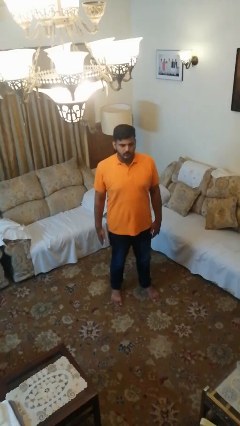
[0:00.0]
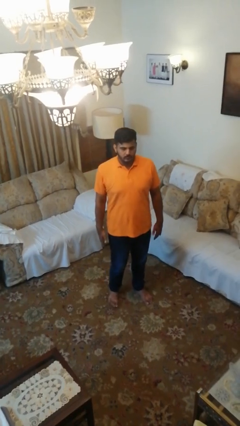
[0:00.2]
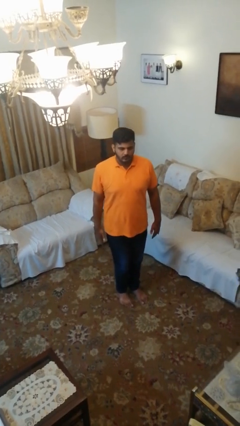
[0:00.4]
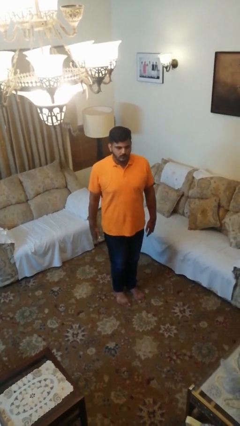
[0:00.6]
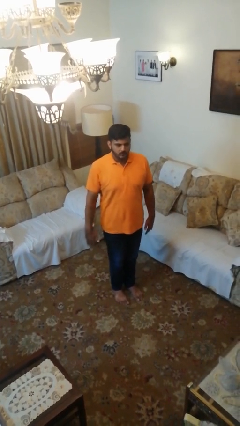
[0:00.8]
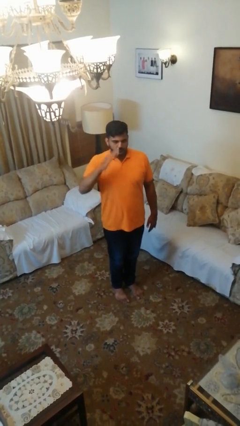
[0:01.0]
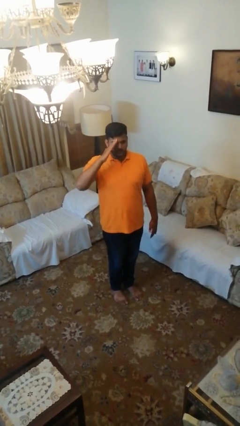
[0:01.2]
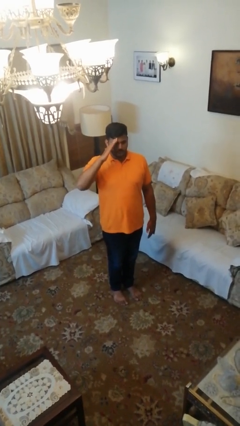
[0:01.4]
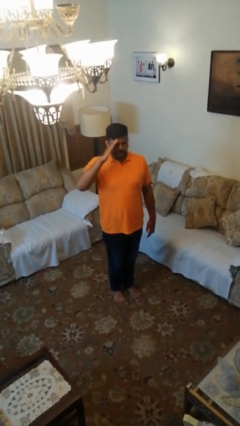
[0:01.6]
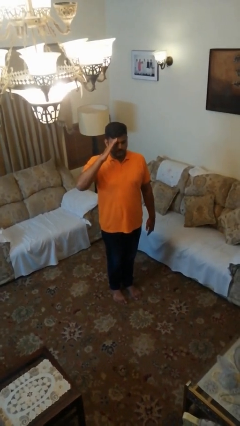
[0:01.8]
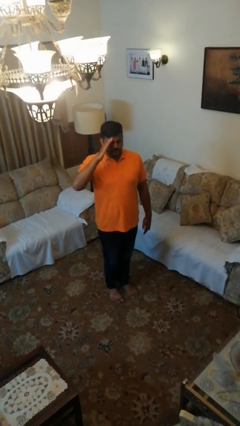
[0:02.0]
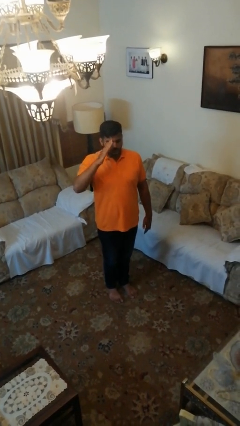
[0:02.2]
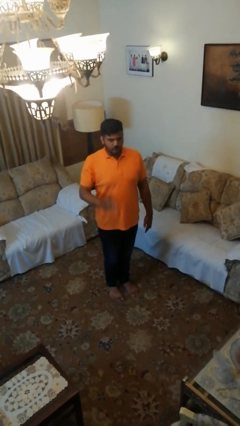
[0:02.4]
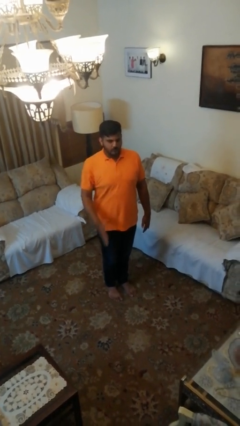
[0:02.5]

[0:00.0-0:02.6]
person salutes

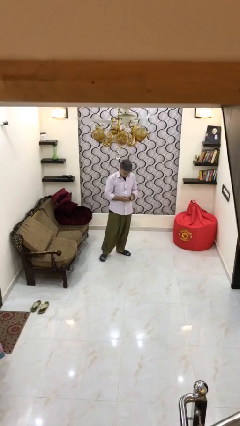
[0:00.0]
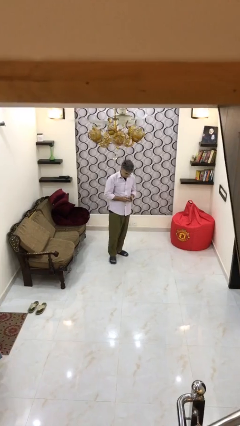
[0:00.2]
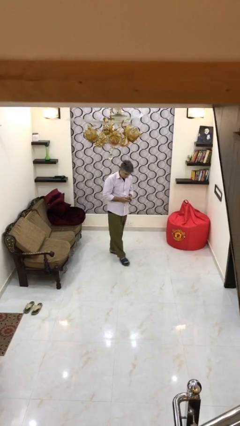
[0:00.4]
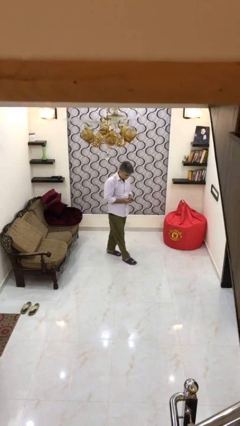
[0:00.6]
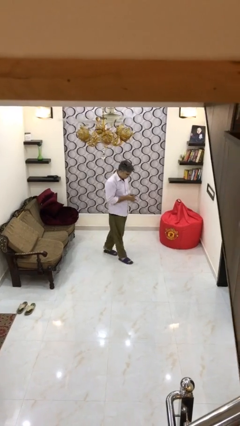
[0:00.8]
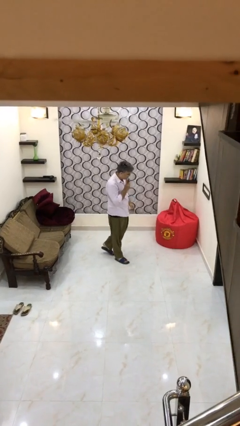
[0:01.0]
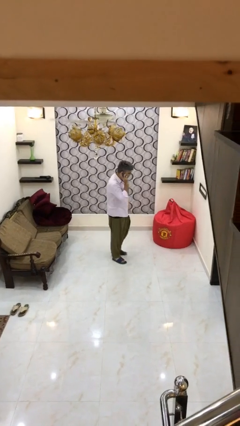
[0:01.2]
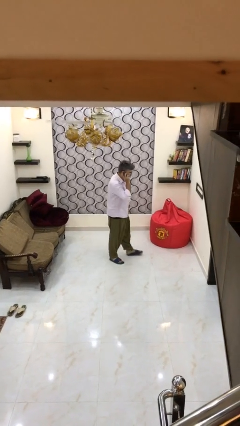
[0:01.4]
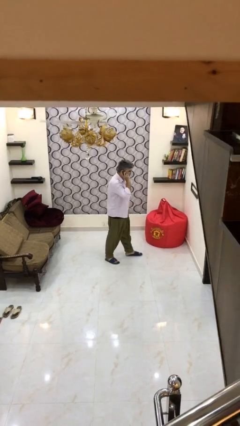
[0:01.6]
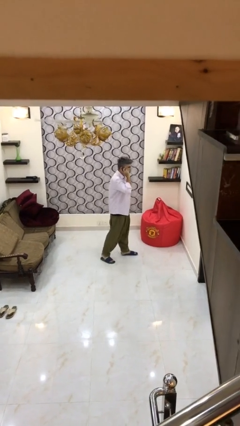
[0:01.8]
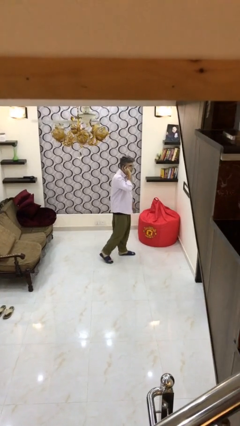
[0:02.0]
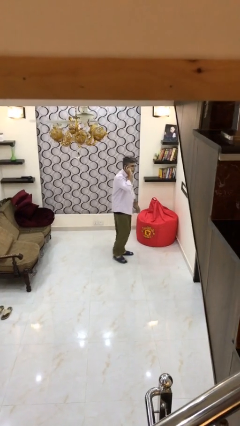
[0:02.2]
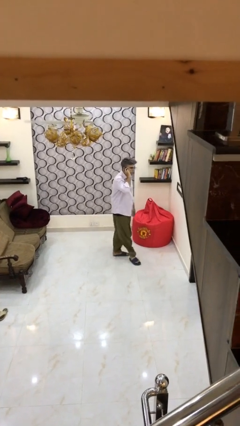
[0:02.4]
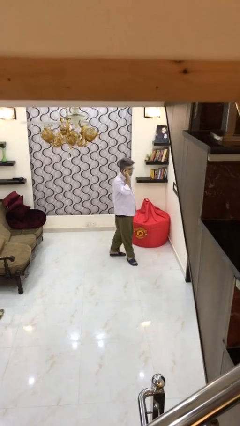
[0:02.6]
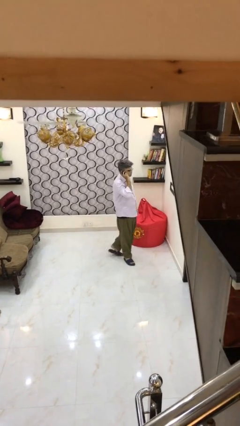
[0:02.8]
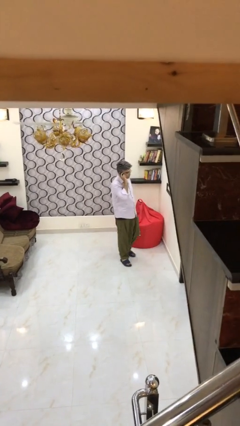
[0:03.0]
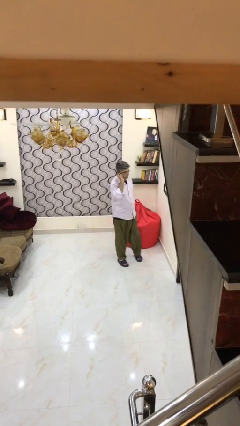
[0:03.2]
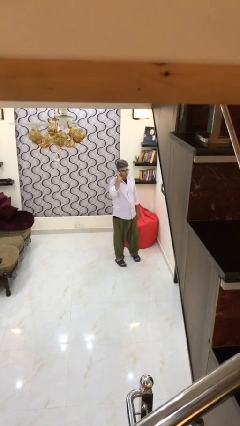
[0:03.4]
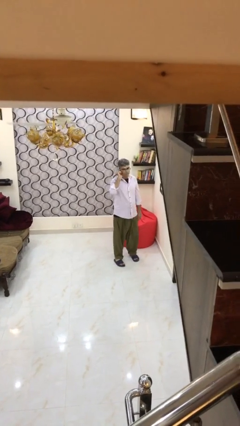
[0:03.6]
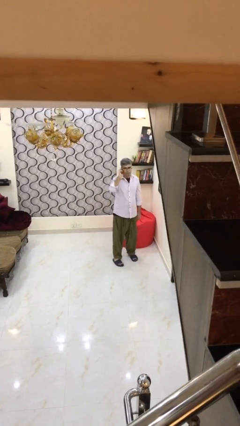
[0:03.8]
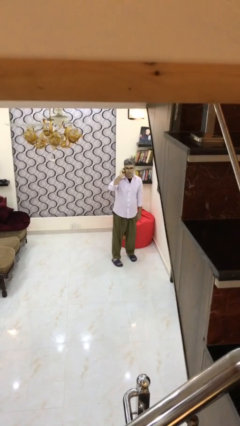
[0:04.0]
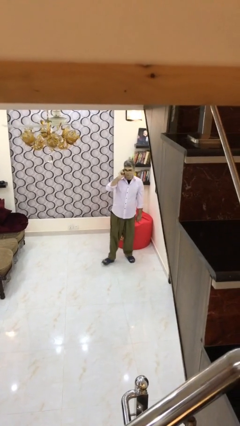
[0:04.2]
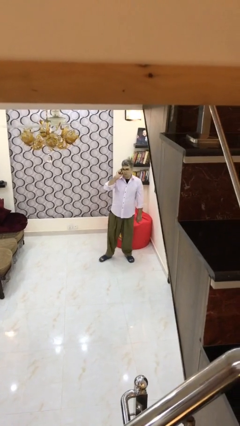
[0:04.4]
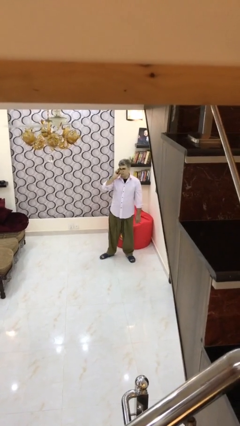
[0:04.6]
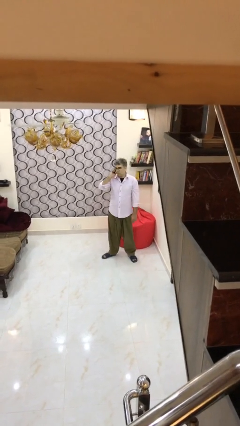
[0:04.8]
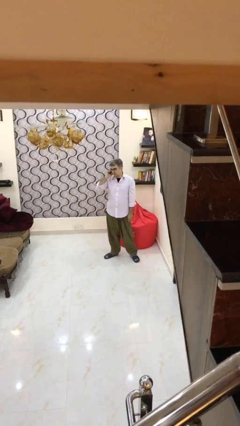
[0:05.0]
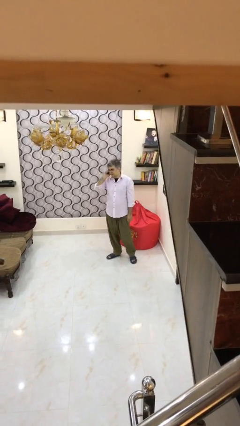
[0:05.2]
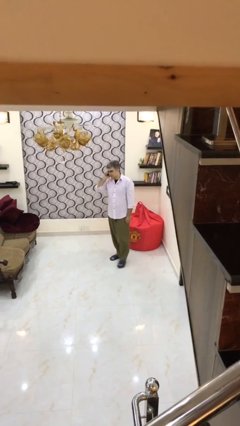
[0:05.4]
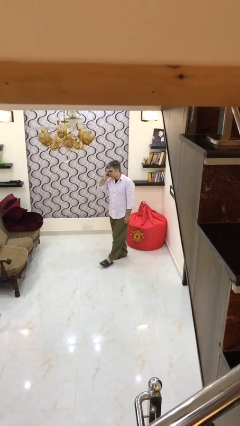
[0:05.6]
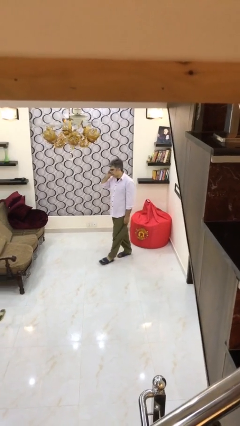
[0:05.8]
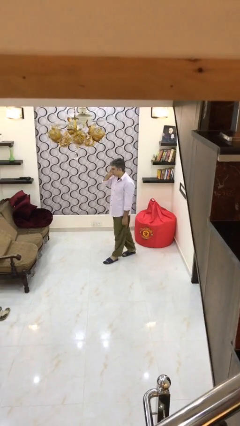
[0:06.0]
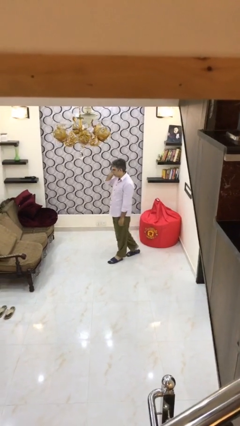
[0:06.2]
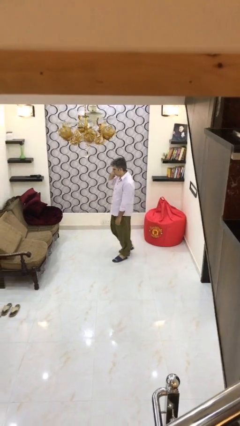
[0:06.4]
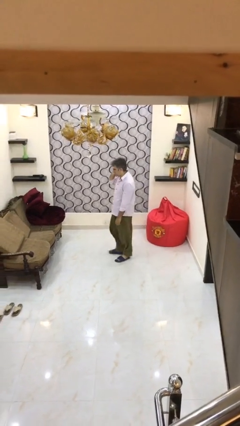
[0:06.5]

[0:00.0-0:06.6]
person talks on phone

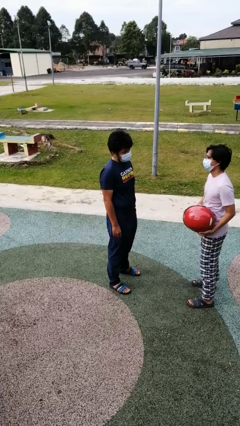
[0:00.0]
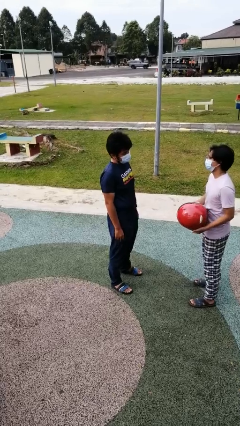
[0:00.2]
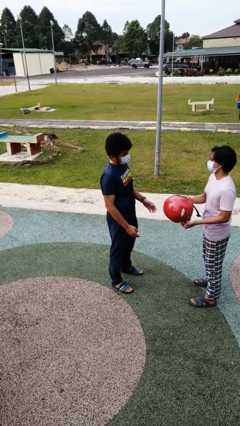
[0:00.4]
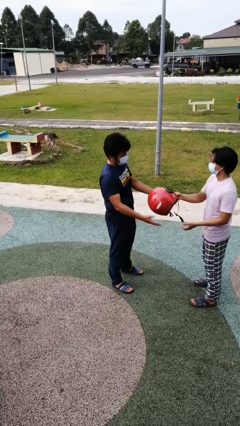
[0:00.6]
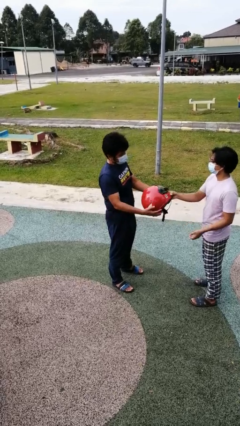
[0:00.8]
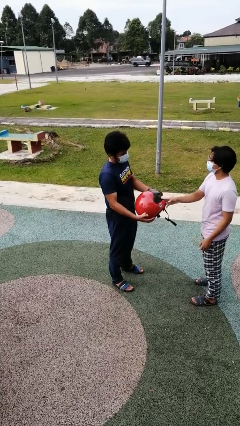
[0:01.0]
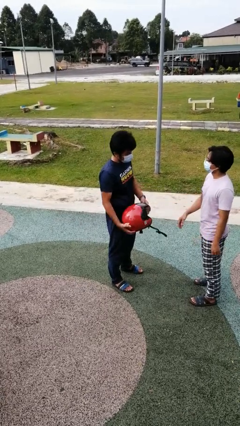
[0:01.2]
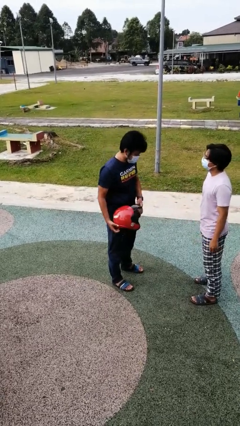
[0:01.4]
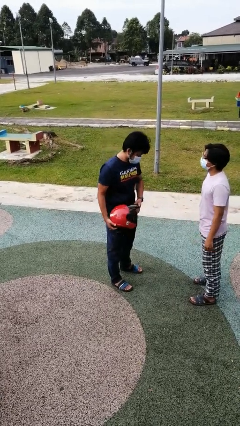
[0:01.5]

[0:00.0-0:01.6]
person transfers object to person

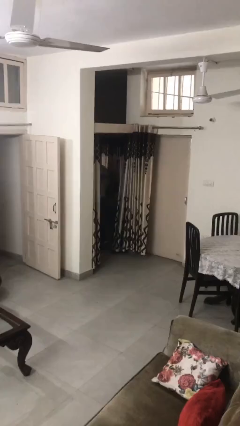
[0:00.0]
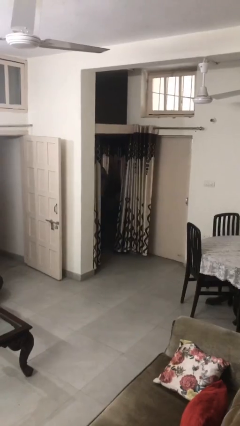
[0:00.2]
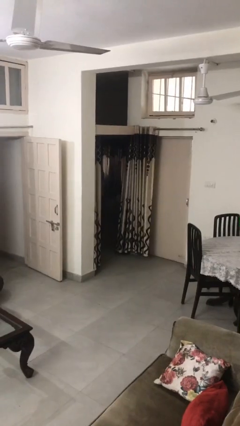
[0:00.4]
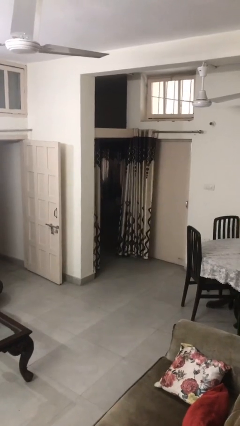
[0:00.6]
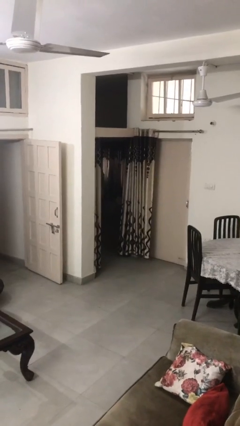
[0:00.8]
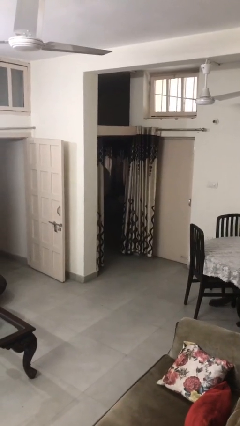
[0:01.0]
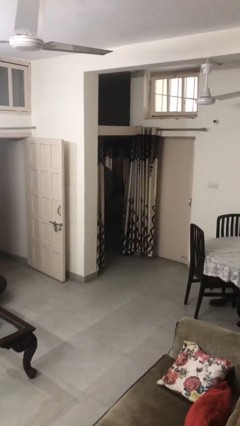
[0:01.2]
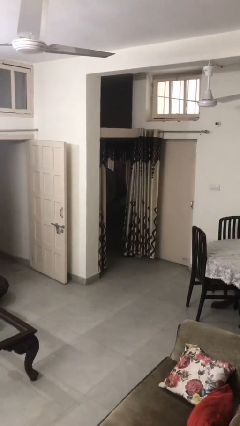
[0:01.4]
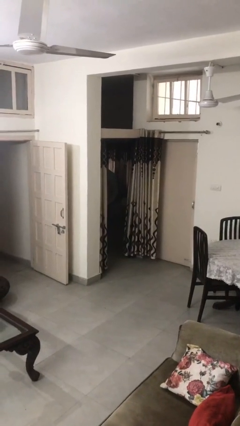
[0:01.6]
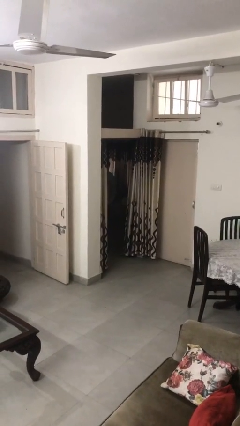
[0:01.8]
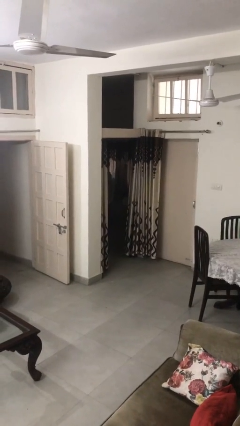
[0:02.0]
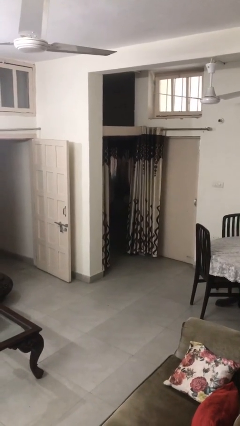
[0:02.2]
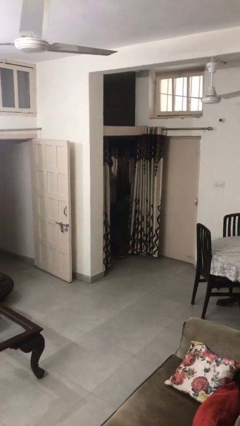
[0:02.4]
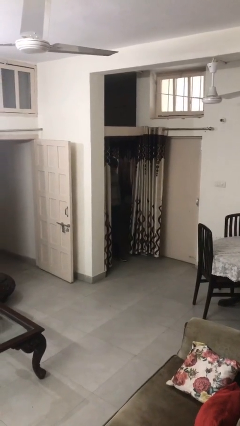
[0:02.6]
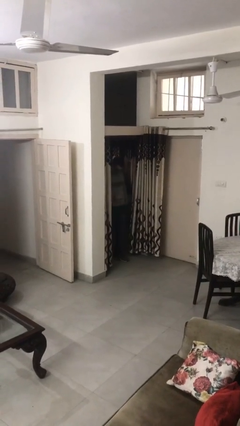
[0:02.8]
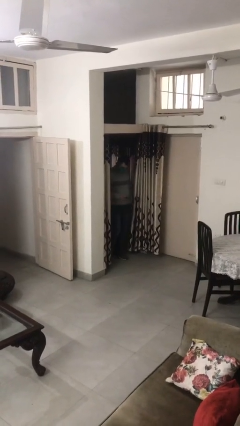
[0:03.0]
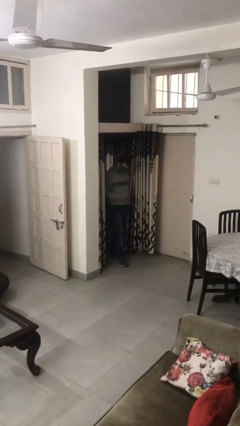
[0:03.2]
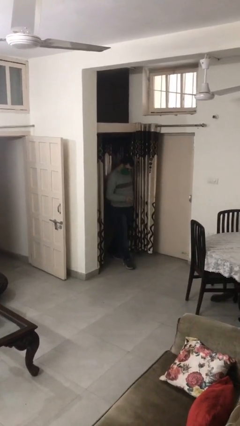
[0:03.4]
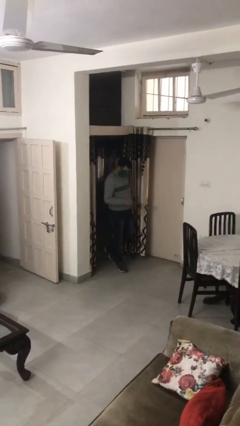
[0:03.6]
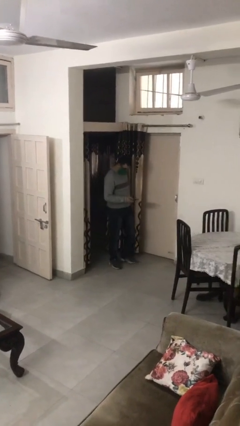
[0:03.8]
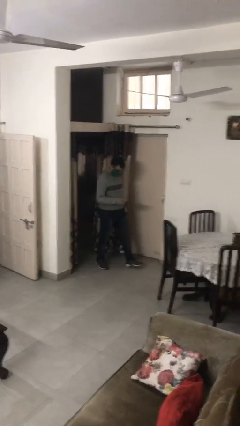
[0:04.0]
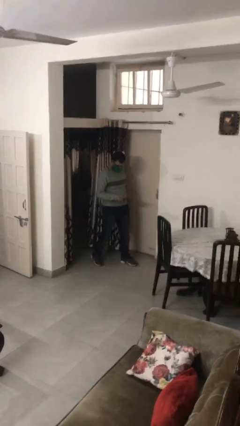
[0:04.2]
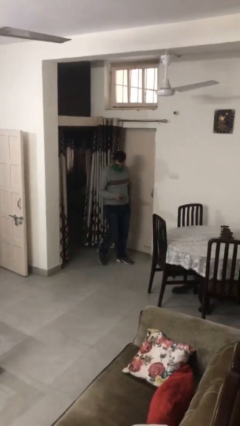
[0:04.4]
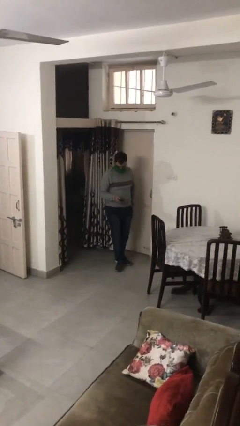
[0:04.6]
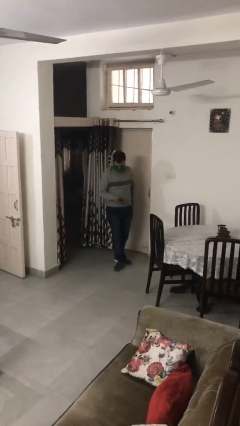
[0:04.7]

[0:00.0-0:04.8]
person enters scene through structure

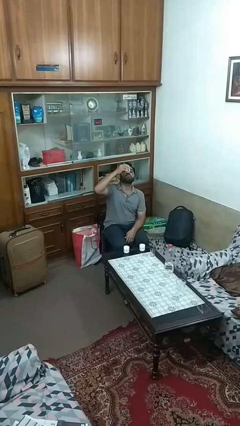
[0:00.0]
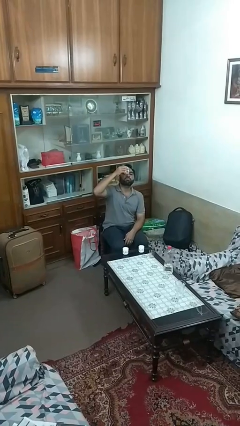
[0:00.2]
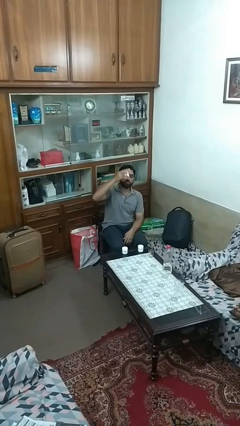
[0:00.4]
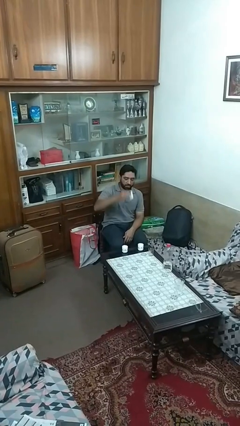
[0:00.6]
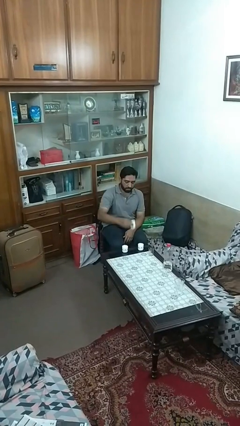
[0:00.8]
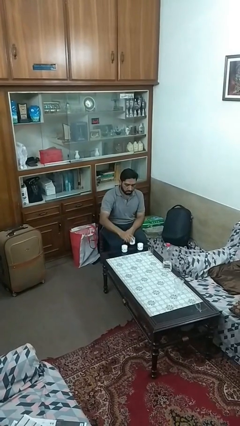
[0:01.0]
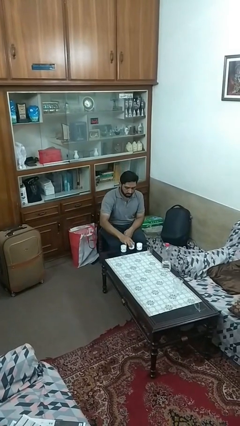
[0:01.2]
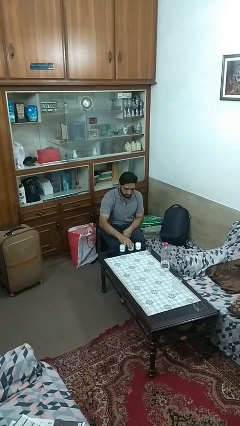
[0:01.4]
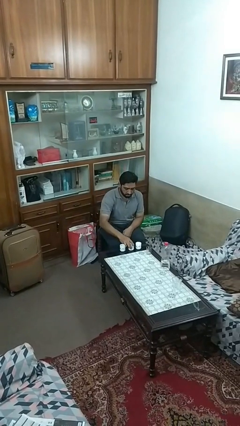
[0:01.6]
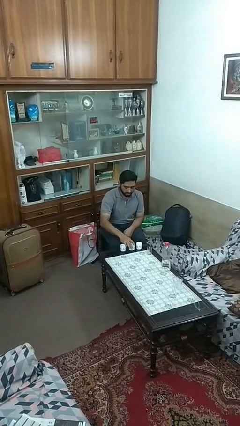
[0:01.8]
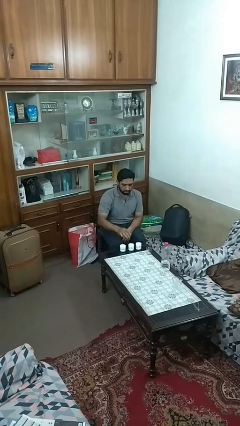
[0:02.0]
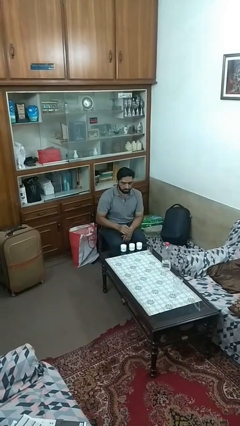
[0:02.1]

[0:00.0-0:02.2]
person puts down object on table
